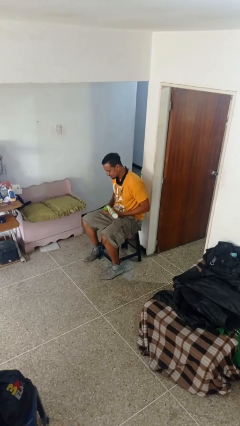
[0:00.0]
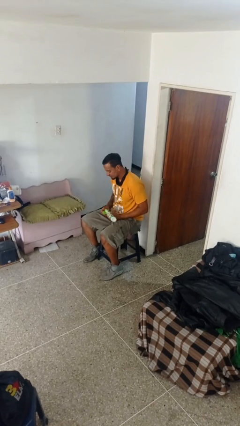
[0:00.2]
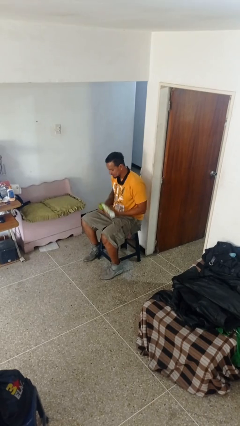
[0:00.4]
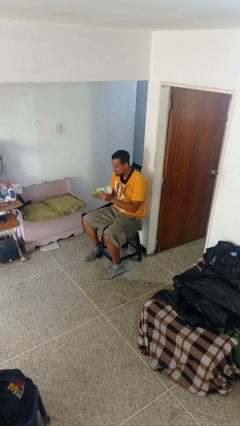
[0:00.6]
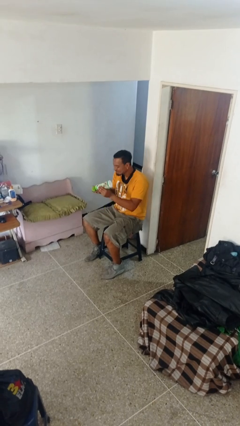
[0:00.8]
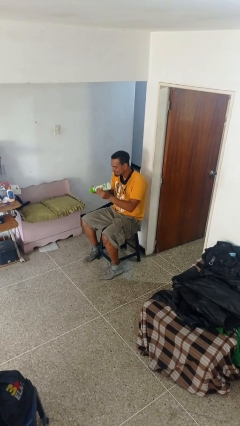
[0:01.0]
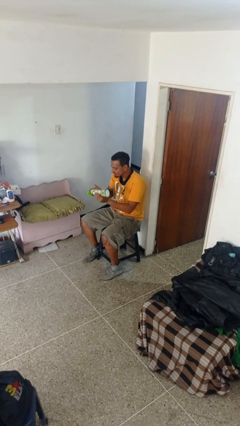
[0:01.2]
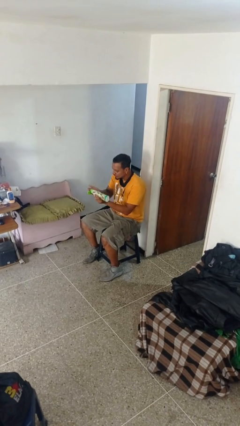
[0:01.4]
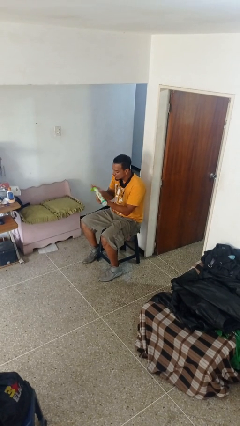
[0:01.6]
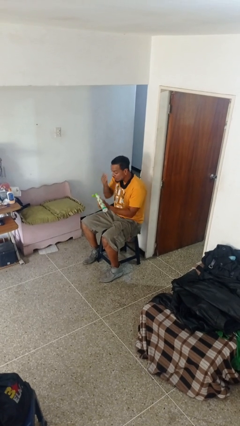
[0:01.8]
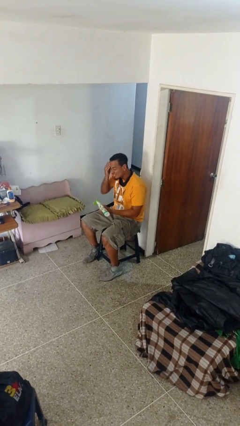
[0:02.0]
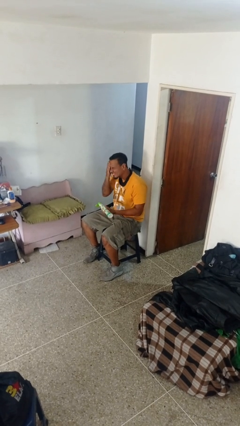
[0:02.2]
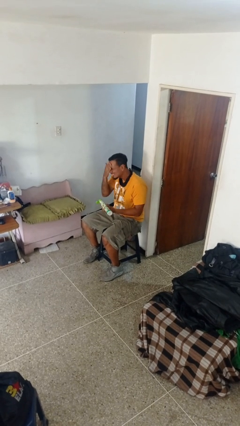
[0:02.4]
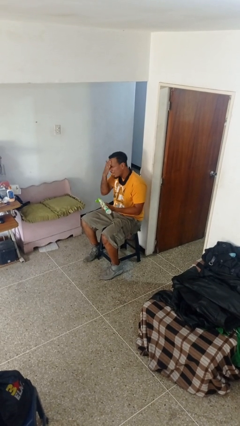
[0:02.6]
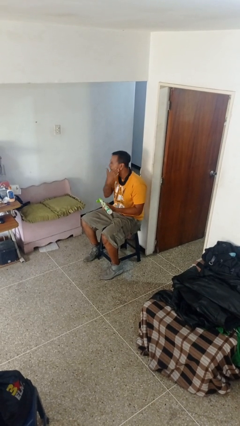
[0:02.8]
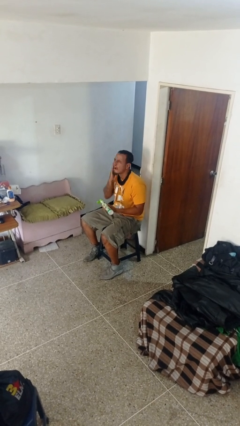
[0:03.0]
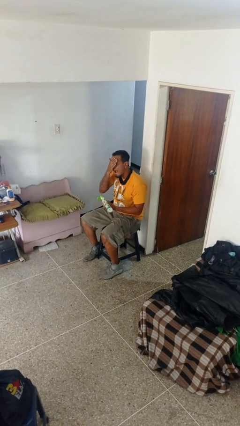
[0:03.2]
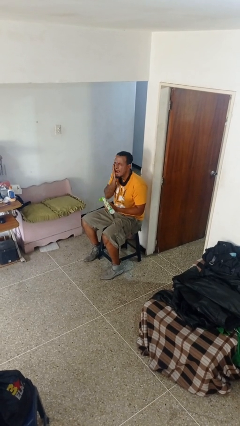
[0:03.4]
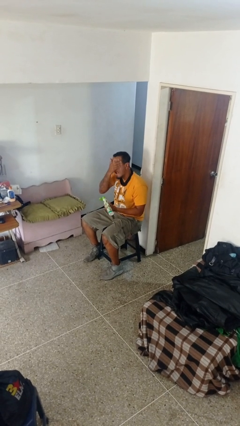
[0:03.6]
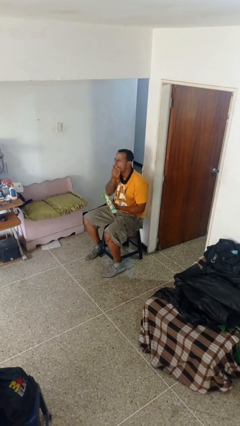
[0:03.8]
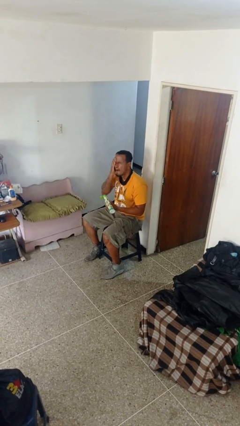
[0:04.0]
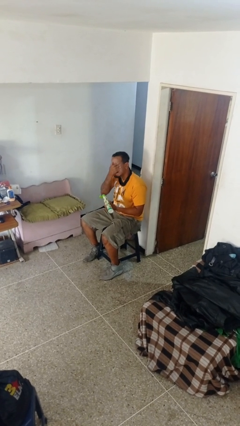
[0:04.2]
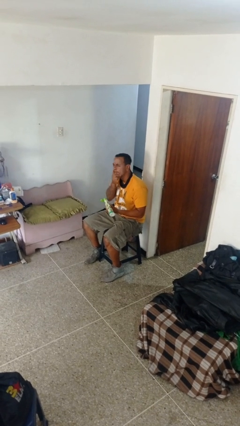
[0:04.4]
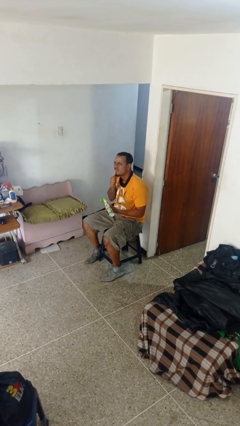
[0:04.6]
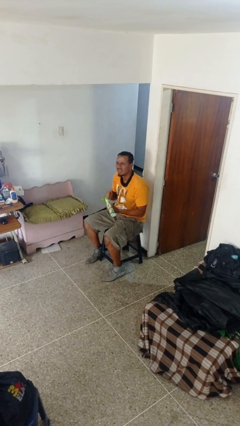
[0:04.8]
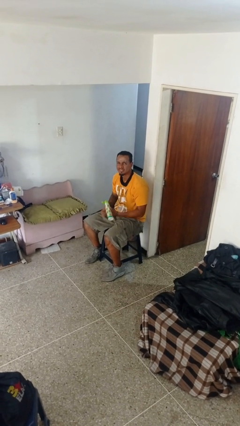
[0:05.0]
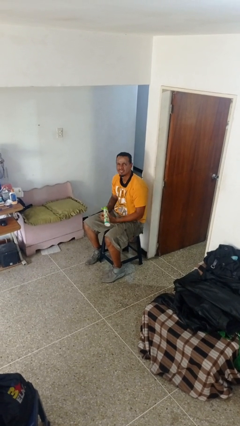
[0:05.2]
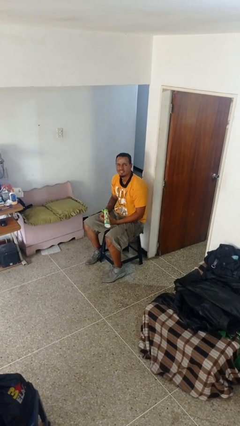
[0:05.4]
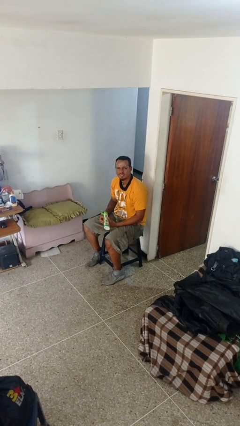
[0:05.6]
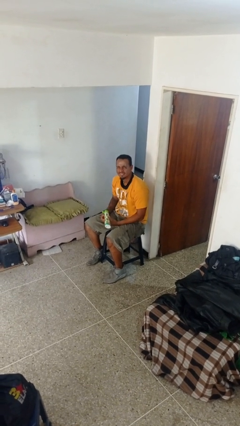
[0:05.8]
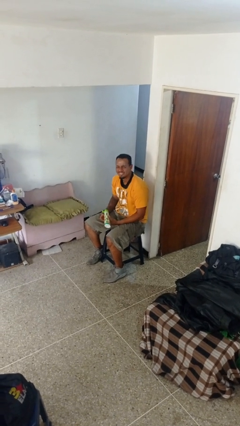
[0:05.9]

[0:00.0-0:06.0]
person applies facial moisturizer

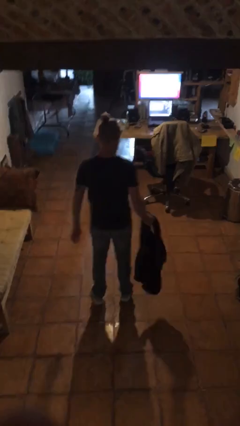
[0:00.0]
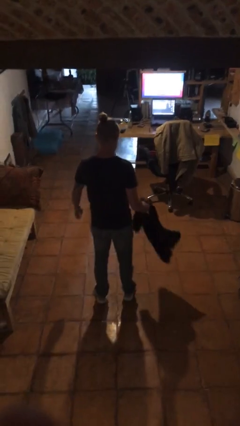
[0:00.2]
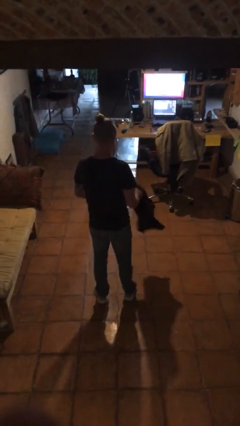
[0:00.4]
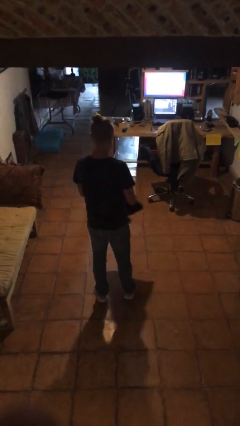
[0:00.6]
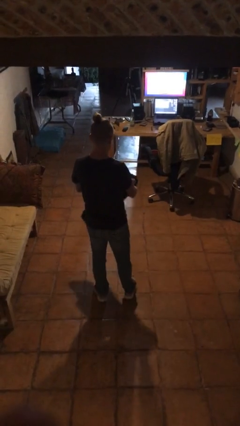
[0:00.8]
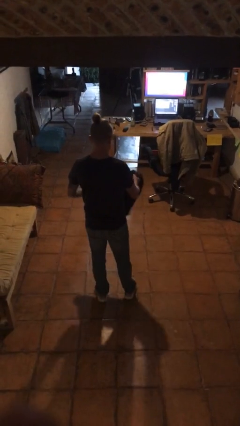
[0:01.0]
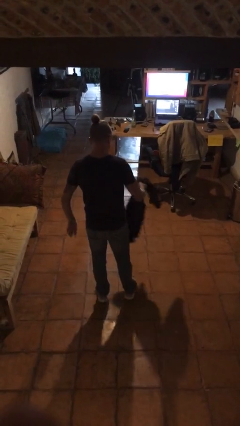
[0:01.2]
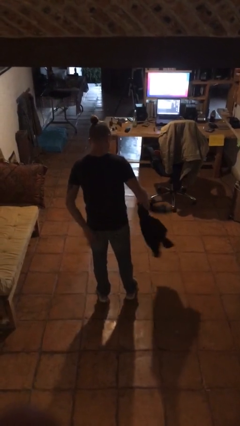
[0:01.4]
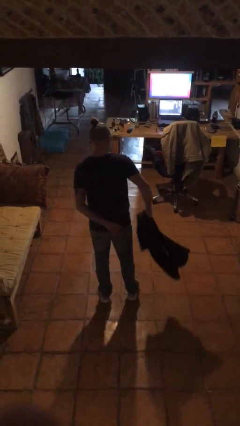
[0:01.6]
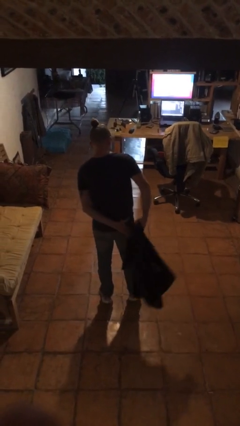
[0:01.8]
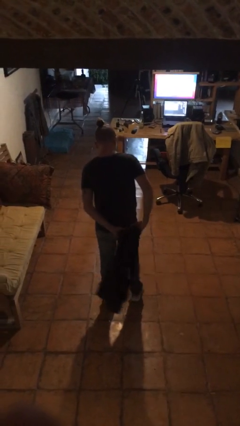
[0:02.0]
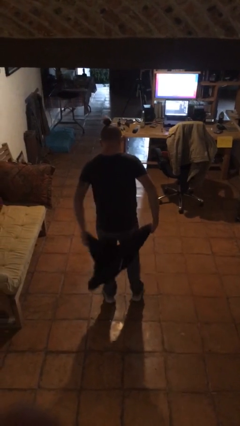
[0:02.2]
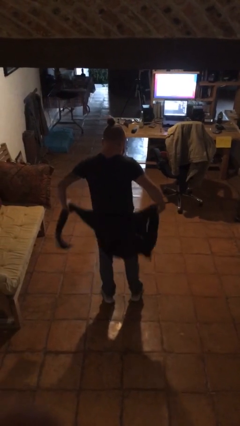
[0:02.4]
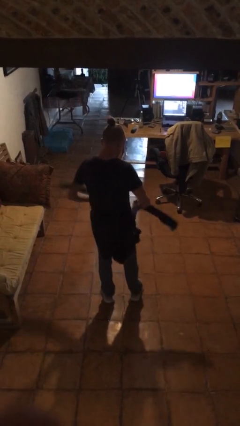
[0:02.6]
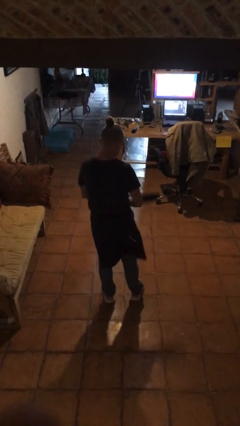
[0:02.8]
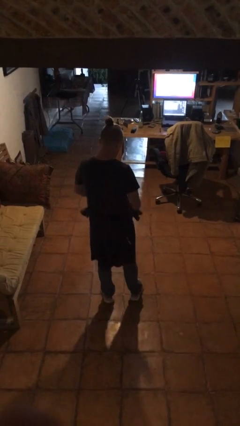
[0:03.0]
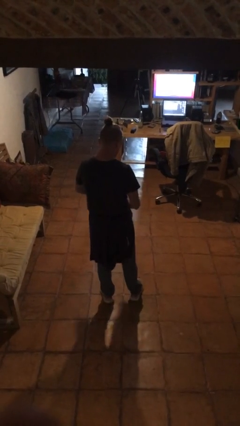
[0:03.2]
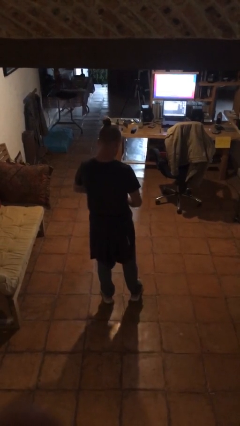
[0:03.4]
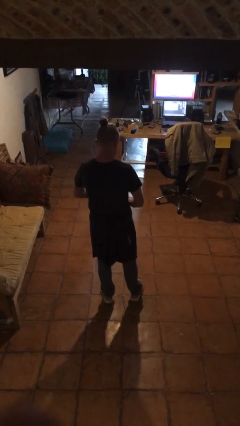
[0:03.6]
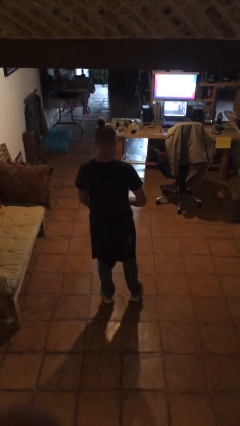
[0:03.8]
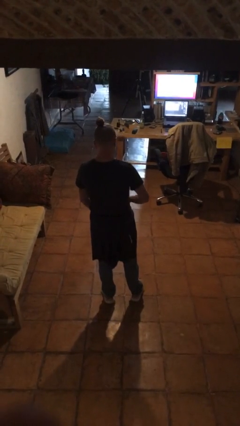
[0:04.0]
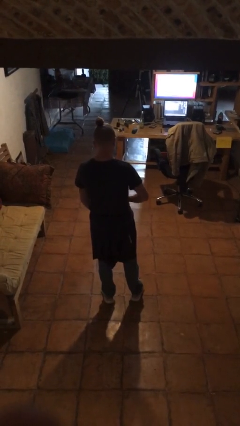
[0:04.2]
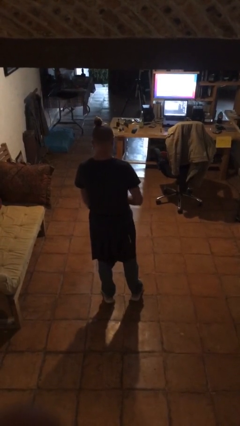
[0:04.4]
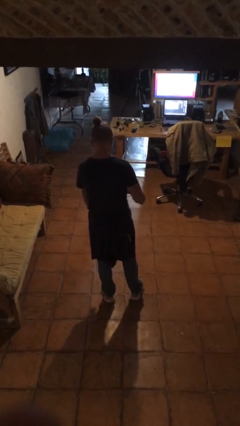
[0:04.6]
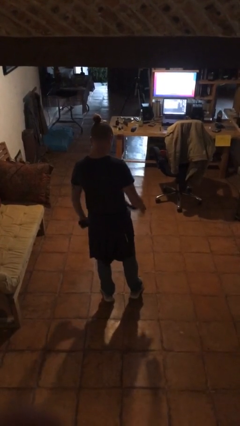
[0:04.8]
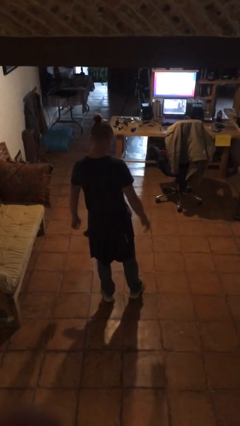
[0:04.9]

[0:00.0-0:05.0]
person ties jacket around waist

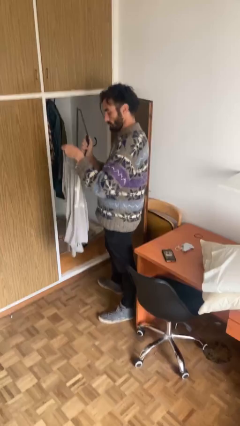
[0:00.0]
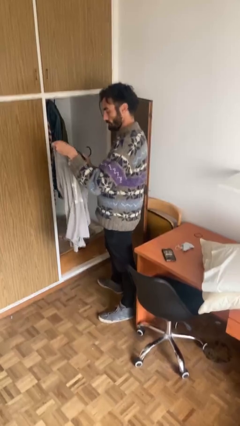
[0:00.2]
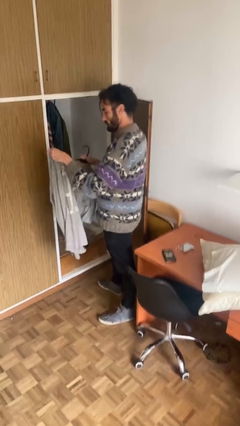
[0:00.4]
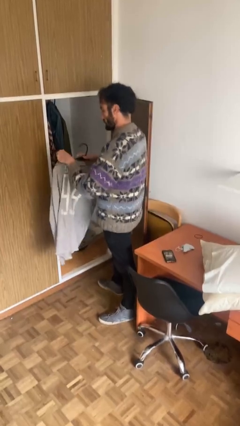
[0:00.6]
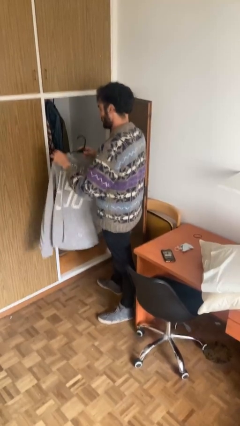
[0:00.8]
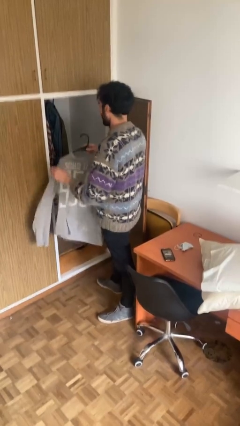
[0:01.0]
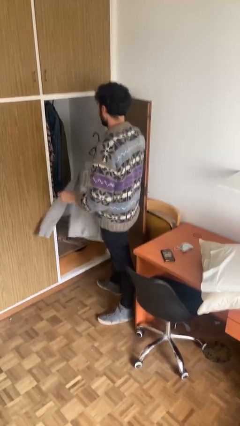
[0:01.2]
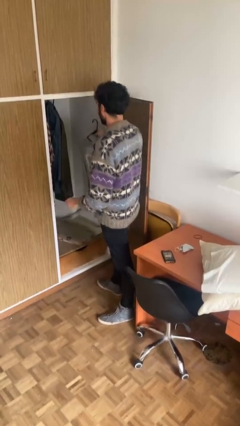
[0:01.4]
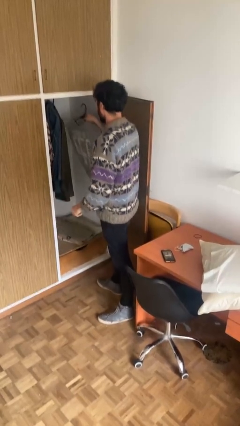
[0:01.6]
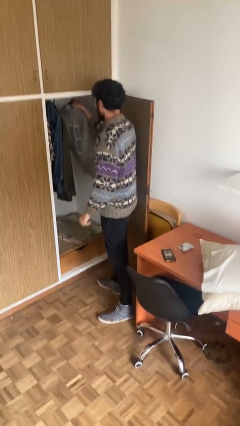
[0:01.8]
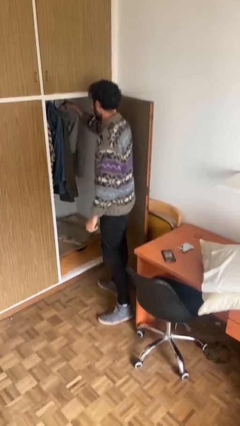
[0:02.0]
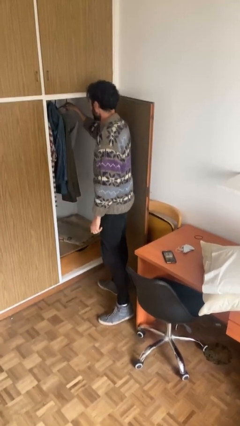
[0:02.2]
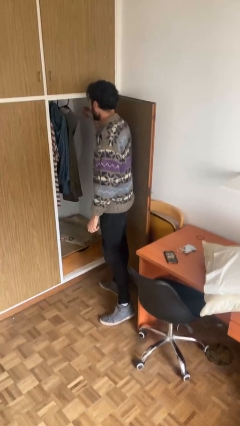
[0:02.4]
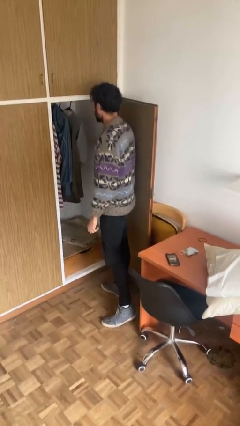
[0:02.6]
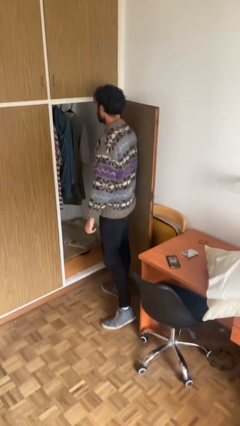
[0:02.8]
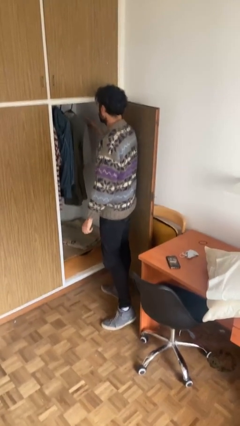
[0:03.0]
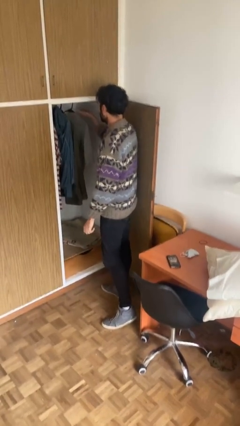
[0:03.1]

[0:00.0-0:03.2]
person puts clothes into closet

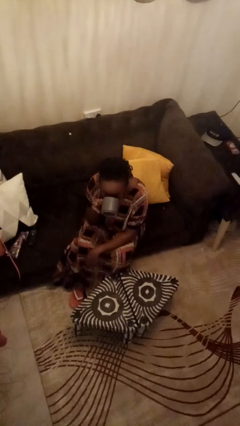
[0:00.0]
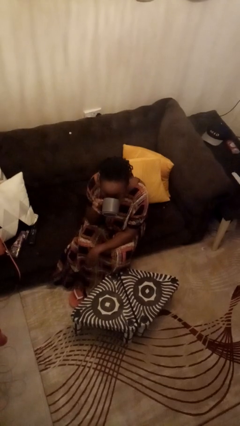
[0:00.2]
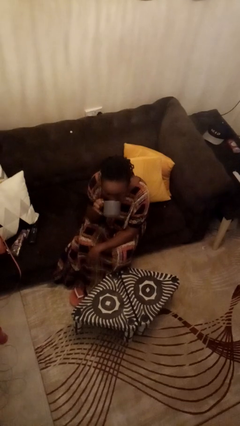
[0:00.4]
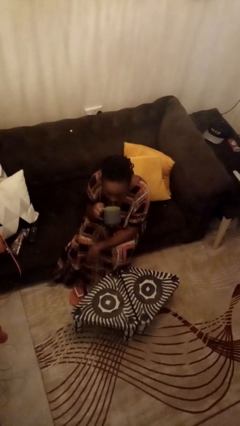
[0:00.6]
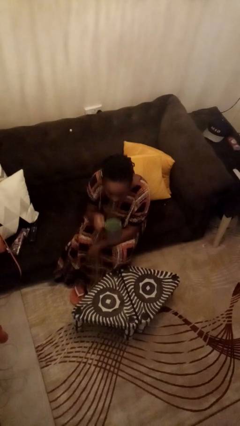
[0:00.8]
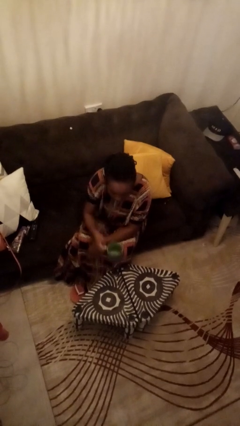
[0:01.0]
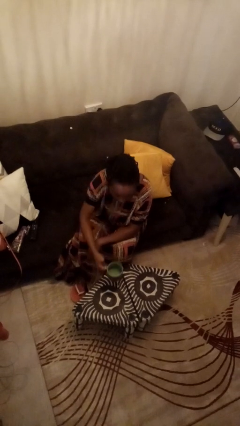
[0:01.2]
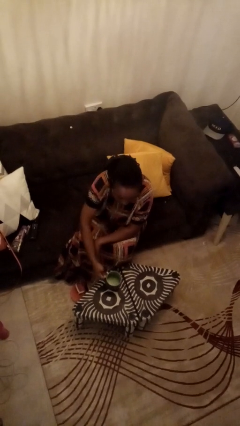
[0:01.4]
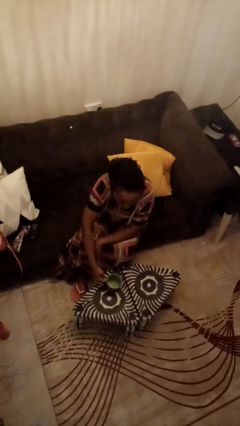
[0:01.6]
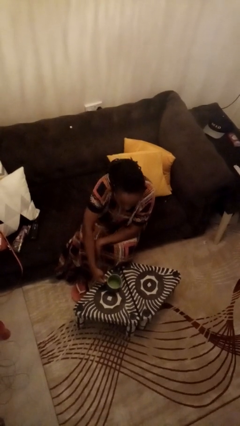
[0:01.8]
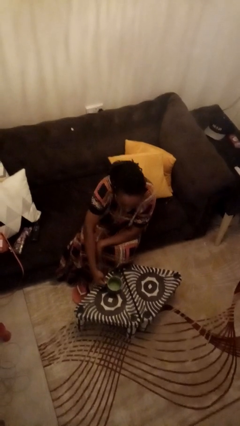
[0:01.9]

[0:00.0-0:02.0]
person puts down object on table

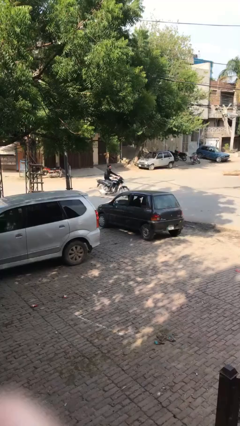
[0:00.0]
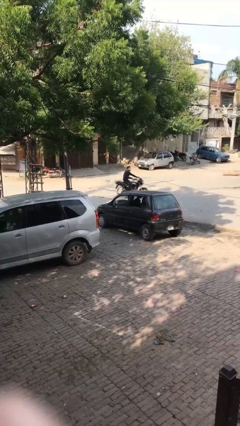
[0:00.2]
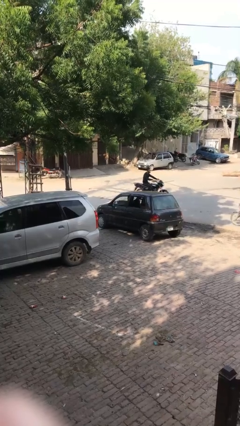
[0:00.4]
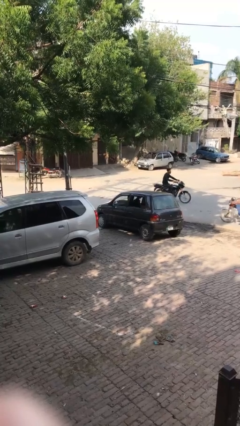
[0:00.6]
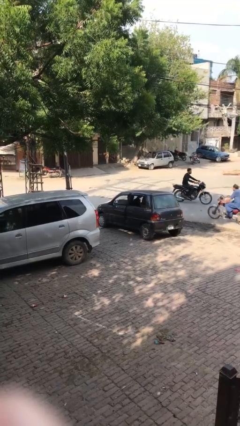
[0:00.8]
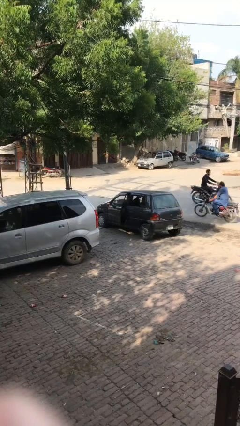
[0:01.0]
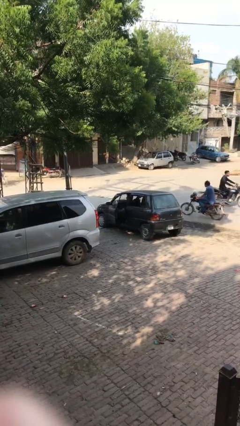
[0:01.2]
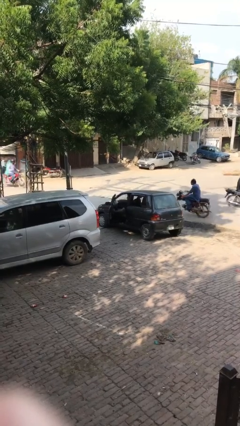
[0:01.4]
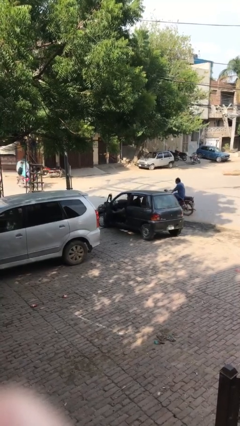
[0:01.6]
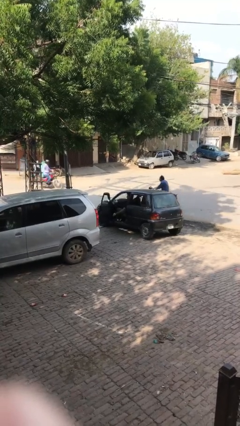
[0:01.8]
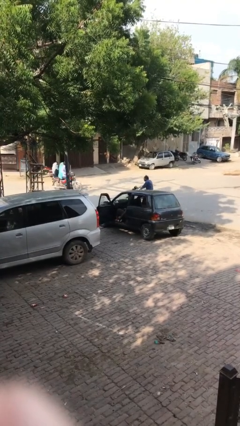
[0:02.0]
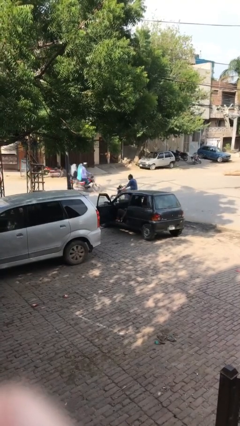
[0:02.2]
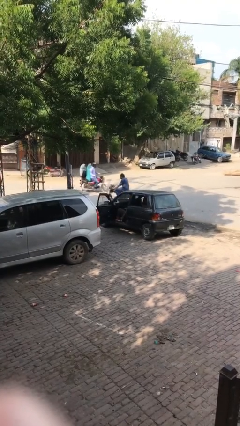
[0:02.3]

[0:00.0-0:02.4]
person opens car door
